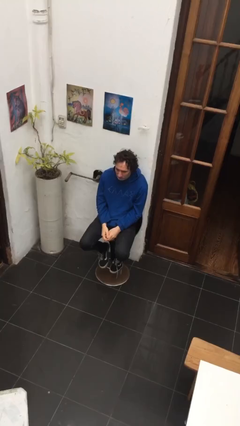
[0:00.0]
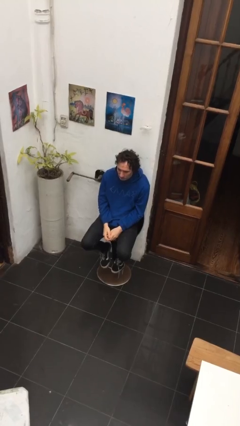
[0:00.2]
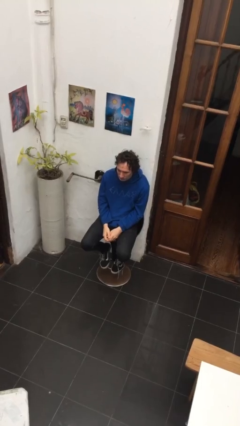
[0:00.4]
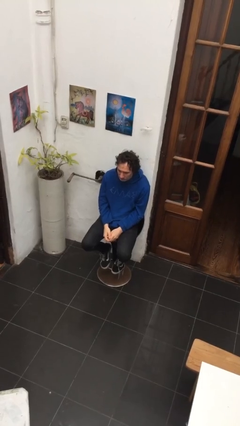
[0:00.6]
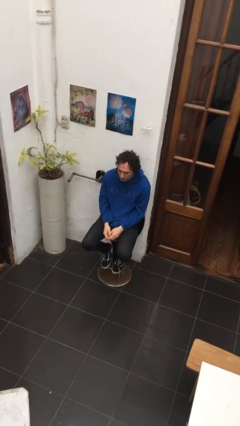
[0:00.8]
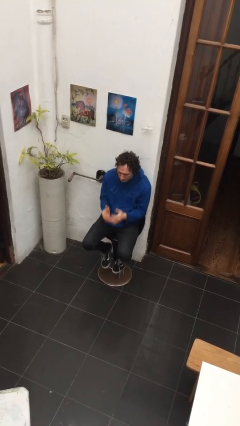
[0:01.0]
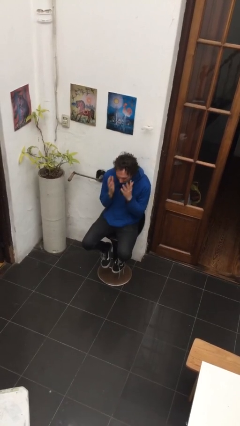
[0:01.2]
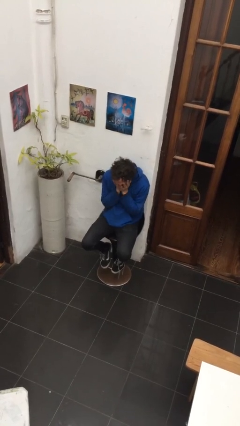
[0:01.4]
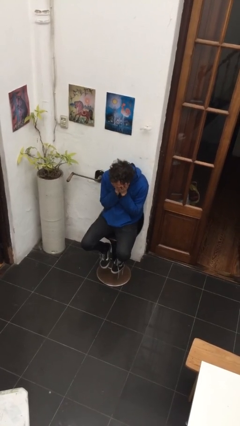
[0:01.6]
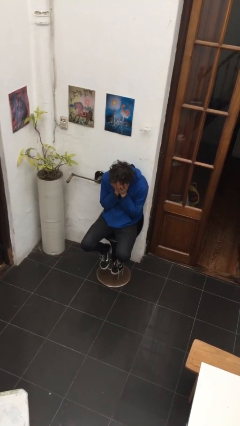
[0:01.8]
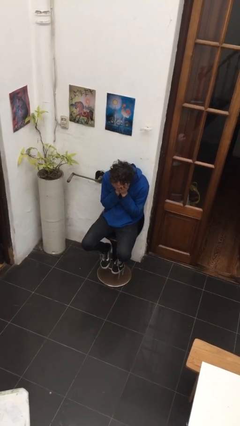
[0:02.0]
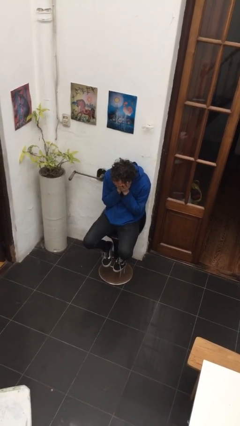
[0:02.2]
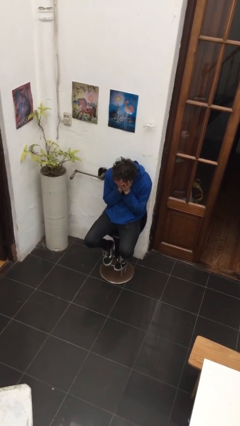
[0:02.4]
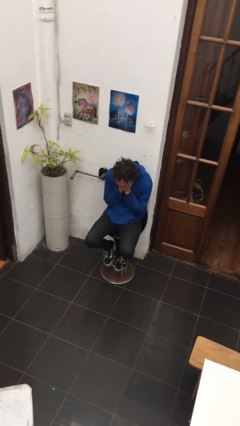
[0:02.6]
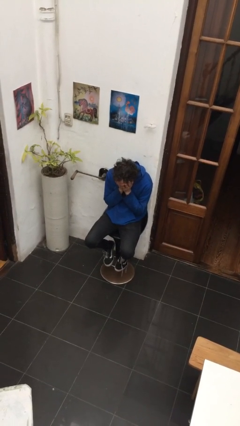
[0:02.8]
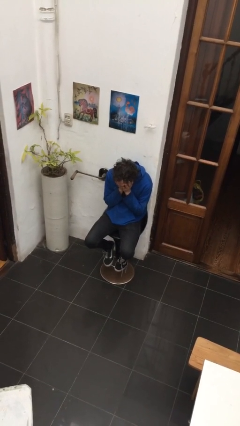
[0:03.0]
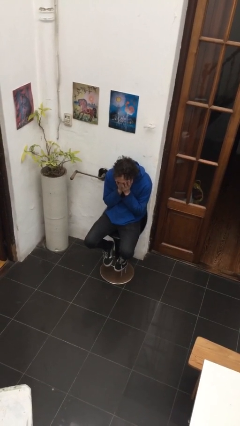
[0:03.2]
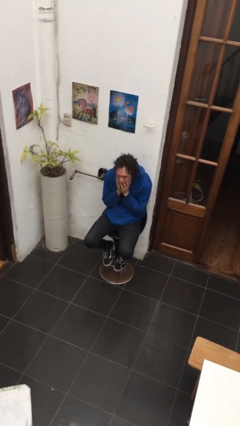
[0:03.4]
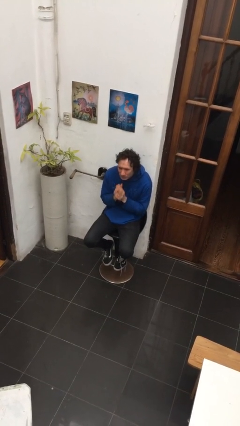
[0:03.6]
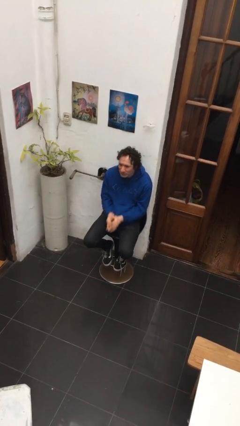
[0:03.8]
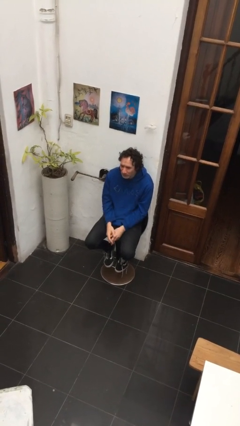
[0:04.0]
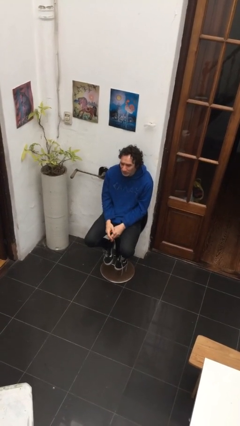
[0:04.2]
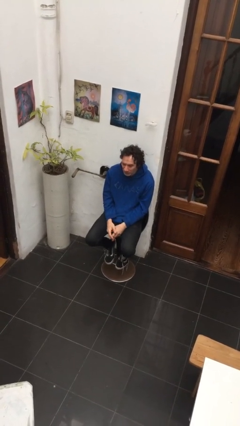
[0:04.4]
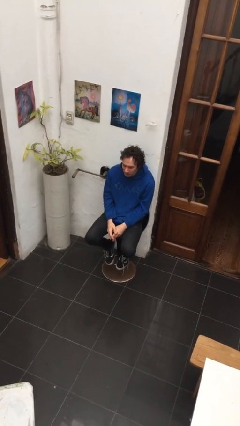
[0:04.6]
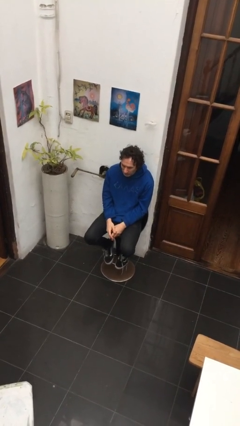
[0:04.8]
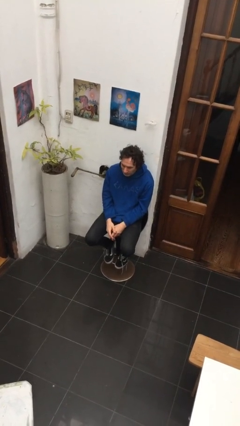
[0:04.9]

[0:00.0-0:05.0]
person covers face with hands

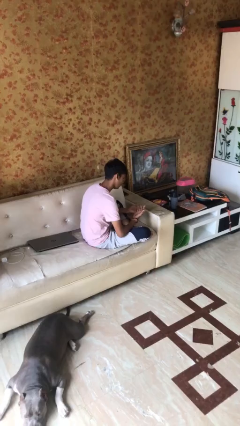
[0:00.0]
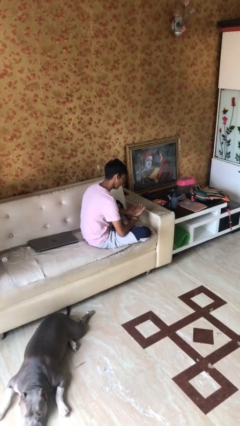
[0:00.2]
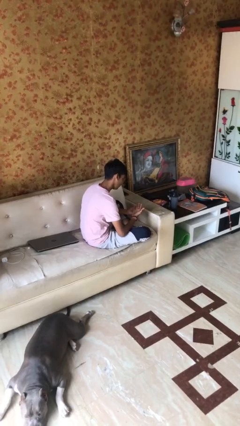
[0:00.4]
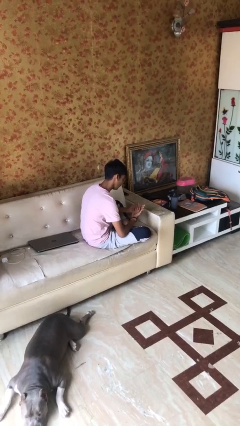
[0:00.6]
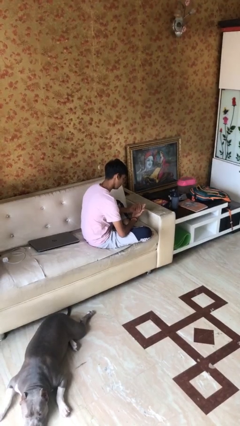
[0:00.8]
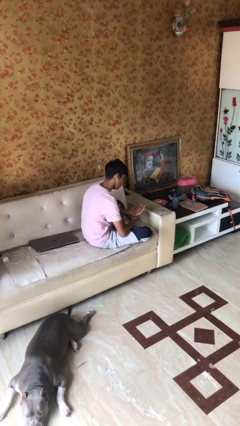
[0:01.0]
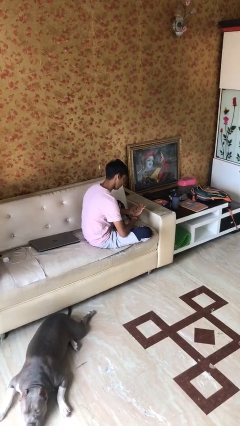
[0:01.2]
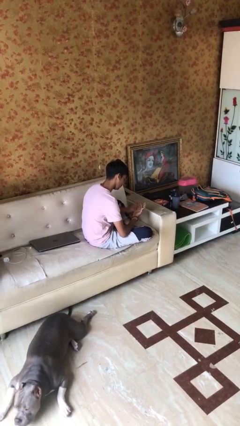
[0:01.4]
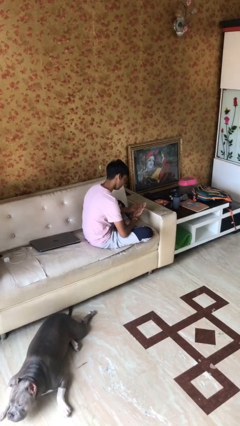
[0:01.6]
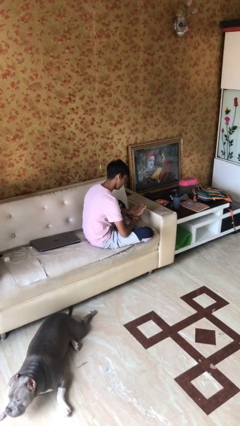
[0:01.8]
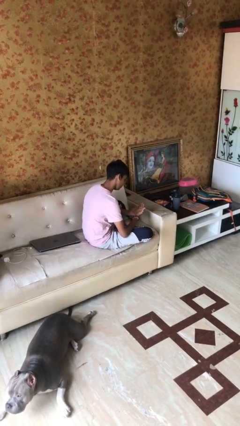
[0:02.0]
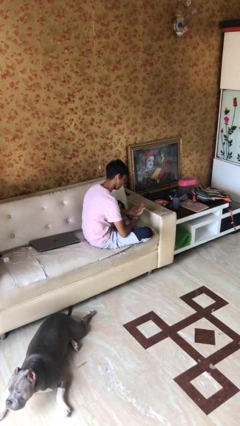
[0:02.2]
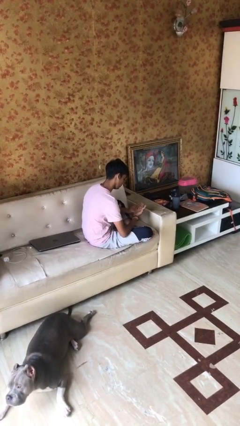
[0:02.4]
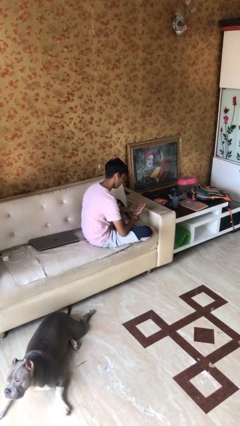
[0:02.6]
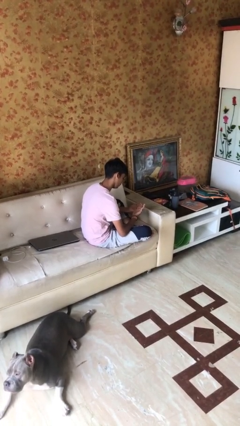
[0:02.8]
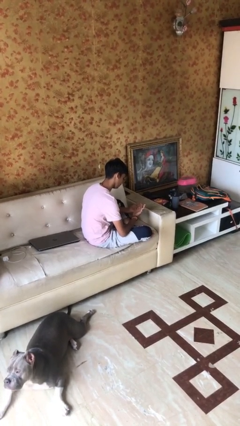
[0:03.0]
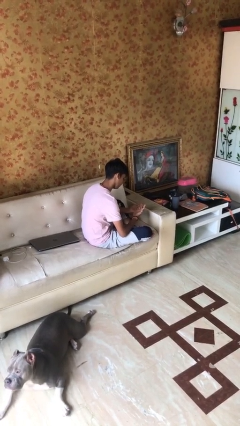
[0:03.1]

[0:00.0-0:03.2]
person looks at hands in lap

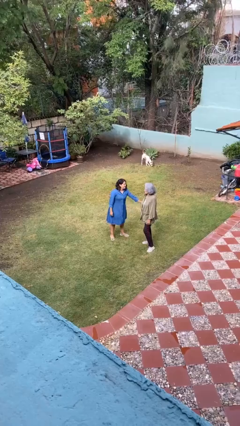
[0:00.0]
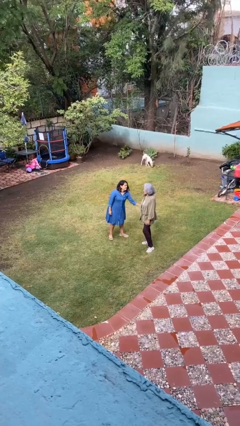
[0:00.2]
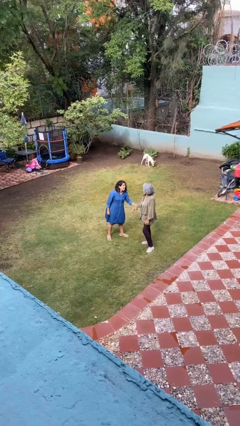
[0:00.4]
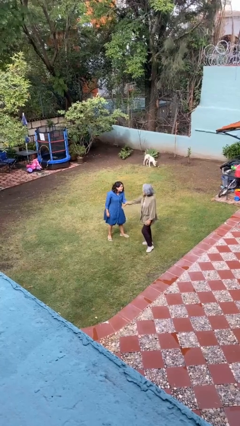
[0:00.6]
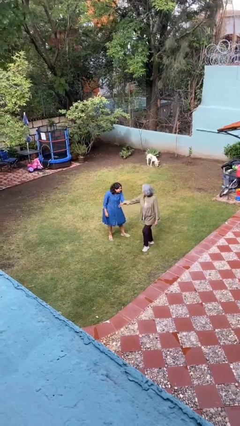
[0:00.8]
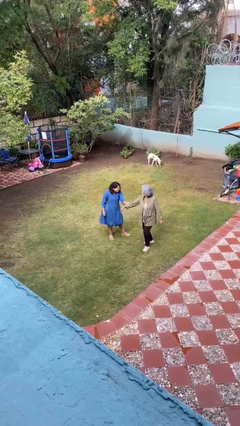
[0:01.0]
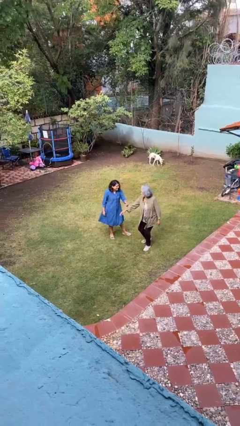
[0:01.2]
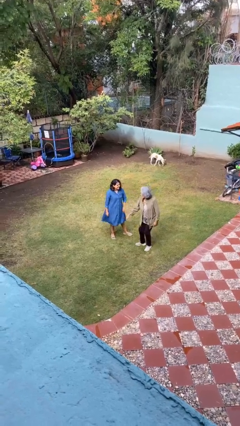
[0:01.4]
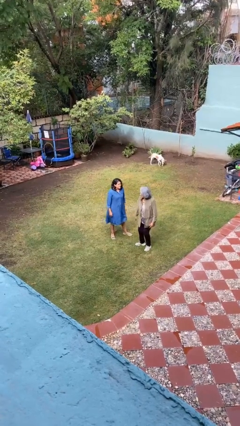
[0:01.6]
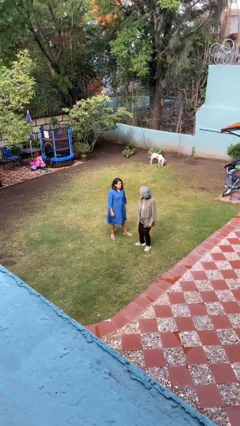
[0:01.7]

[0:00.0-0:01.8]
person grabs person by forearm

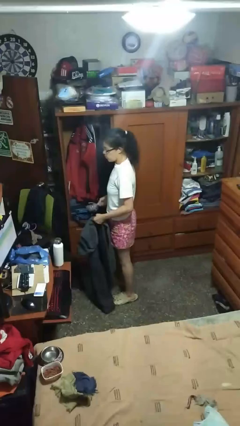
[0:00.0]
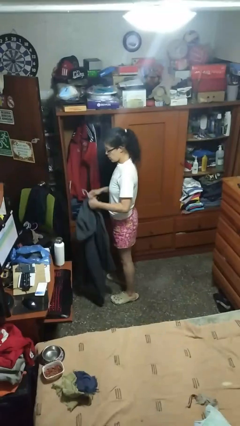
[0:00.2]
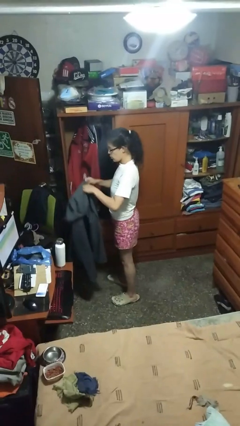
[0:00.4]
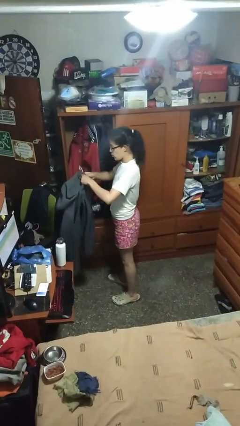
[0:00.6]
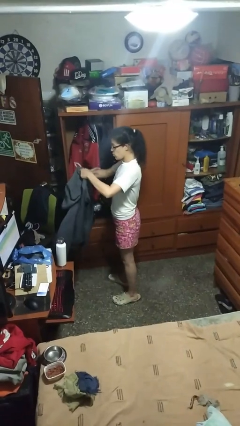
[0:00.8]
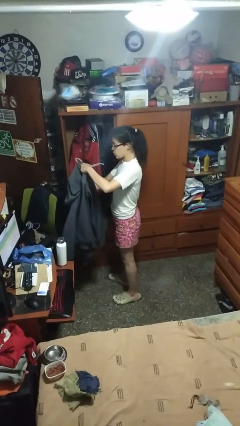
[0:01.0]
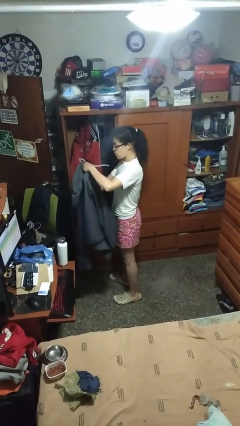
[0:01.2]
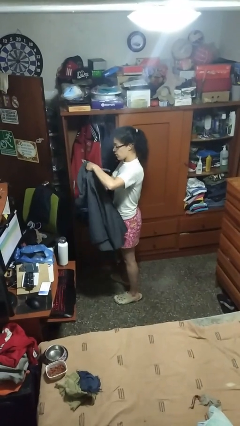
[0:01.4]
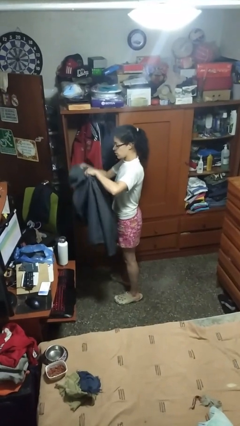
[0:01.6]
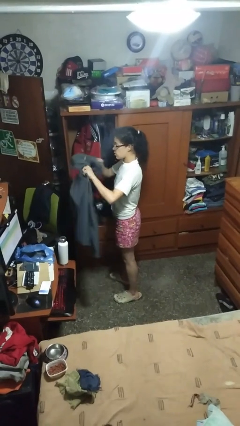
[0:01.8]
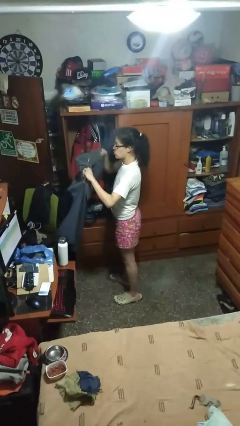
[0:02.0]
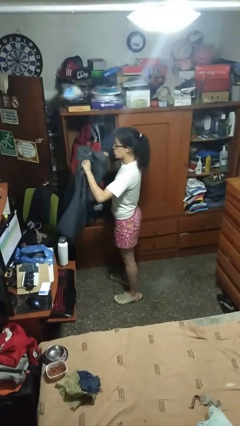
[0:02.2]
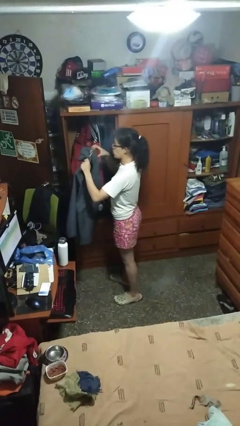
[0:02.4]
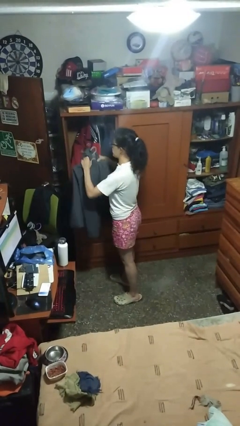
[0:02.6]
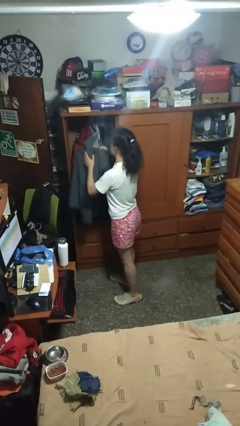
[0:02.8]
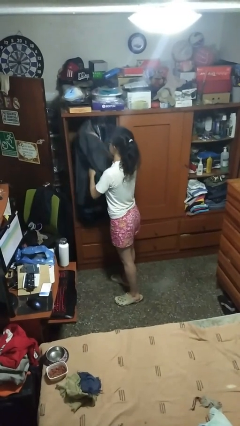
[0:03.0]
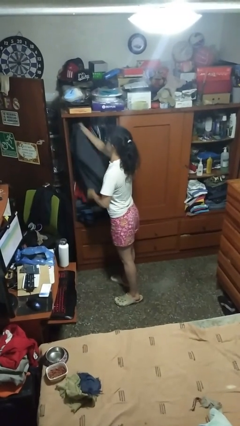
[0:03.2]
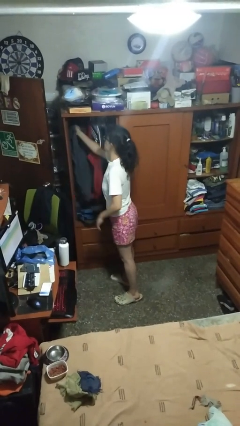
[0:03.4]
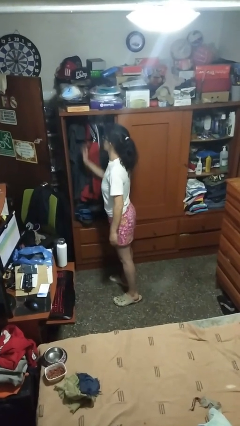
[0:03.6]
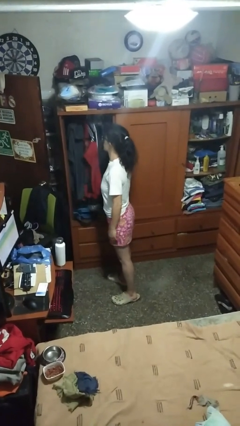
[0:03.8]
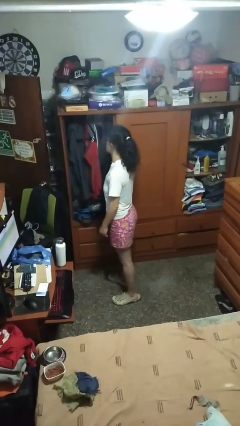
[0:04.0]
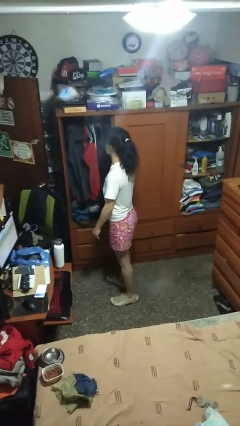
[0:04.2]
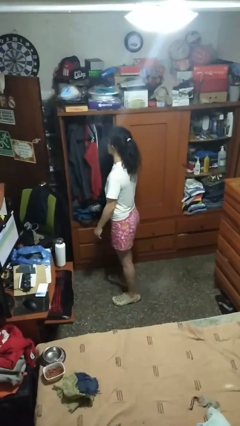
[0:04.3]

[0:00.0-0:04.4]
person puts clothes into closet

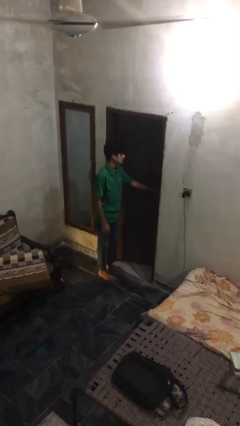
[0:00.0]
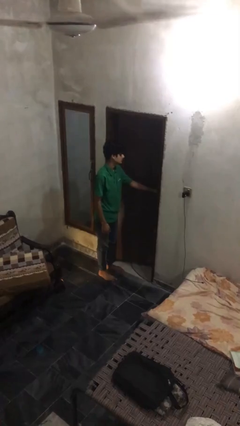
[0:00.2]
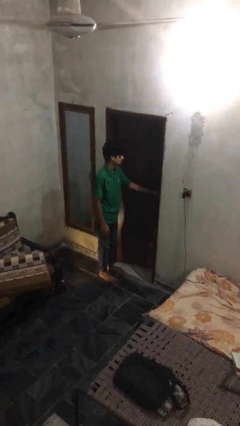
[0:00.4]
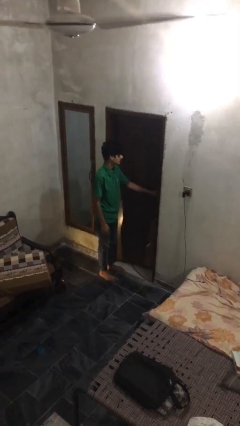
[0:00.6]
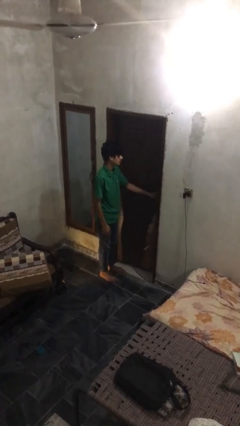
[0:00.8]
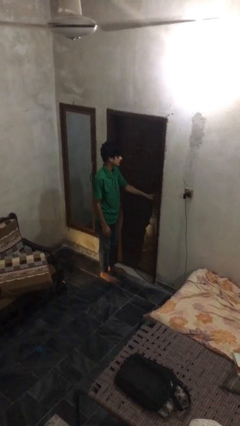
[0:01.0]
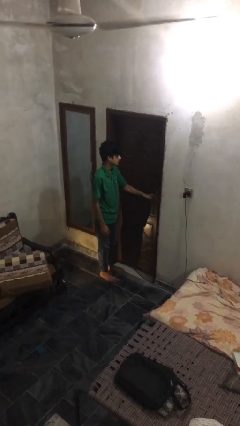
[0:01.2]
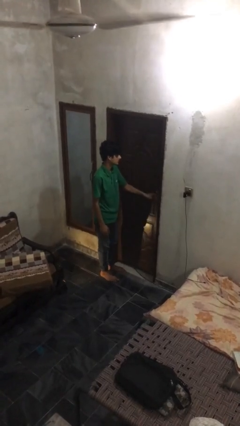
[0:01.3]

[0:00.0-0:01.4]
person closes facility door

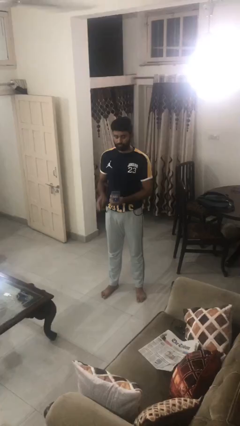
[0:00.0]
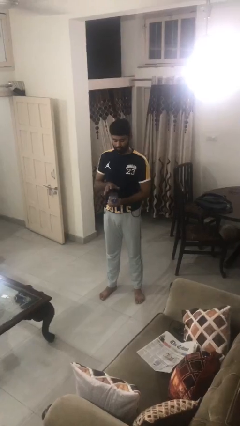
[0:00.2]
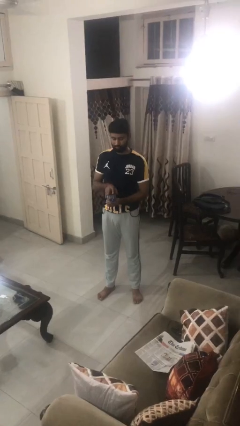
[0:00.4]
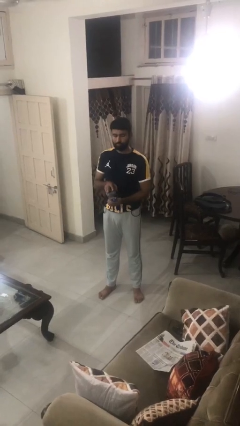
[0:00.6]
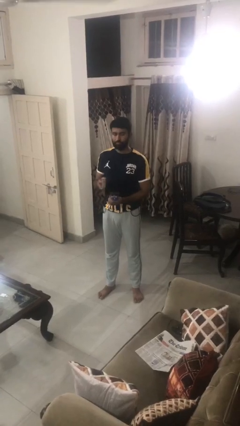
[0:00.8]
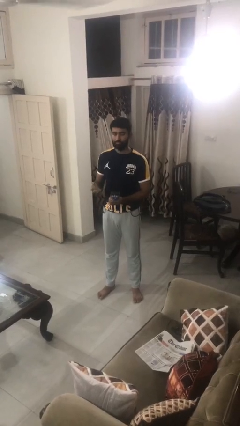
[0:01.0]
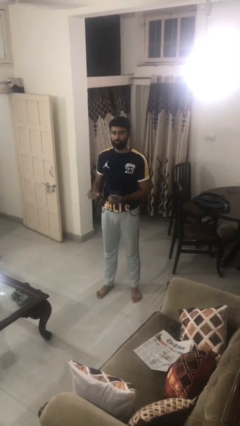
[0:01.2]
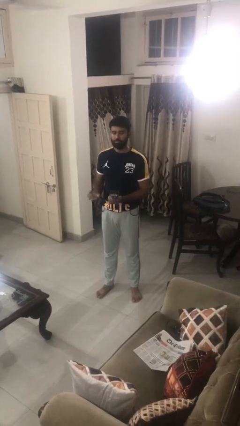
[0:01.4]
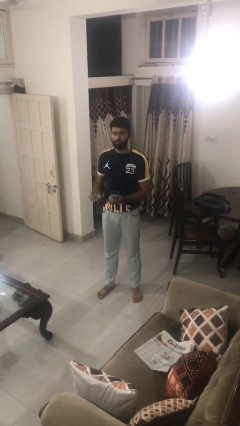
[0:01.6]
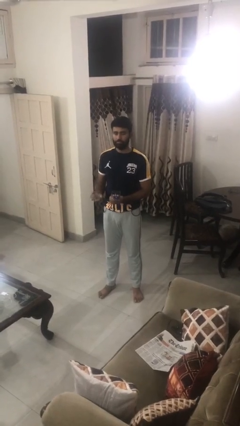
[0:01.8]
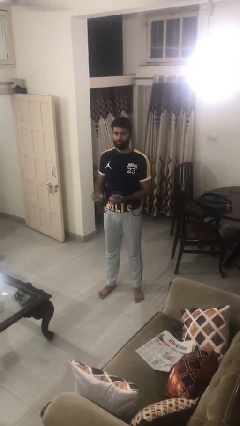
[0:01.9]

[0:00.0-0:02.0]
person opens jewelry box
